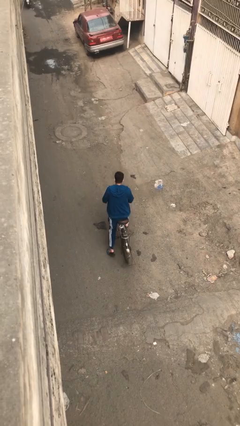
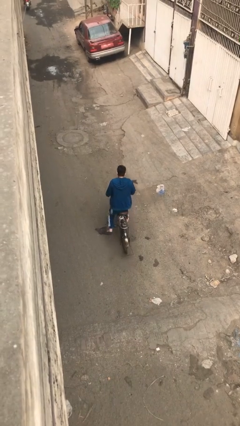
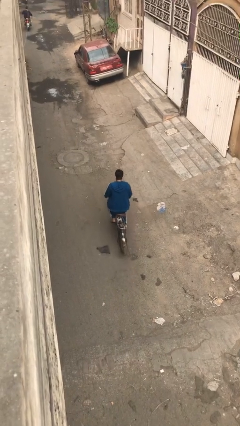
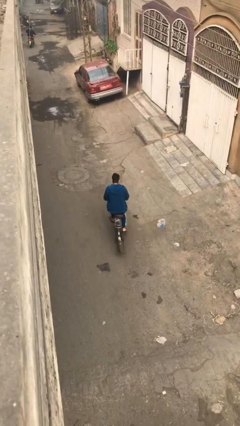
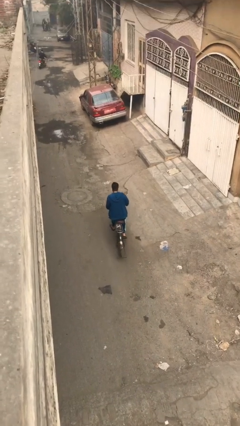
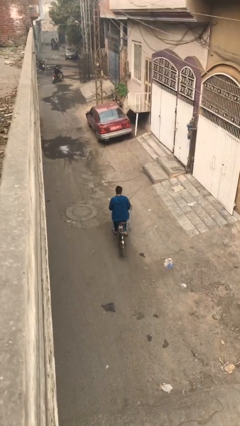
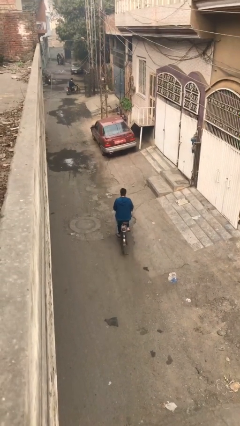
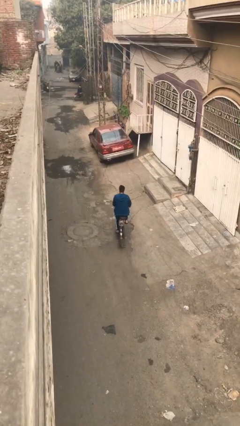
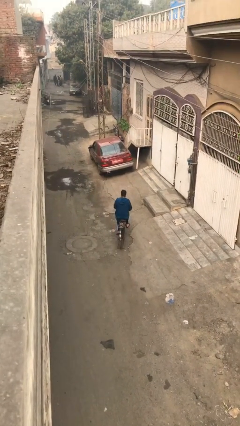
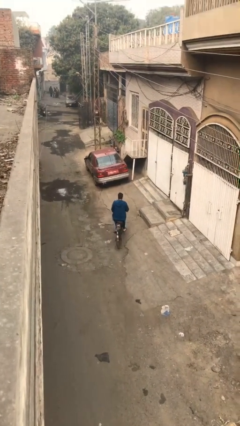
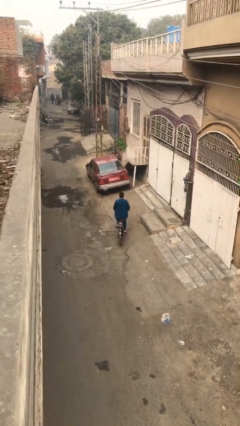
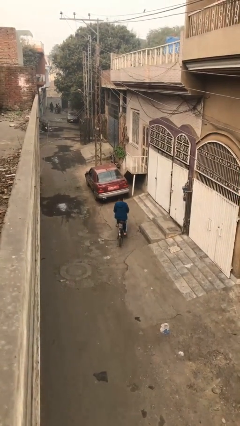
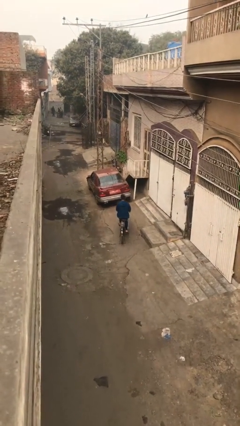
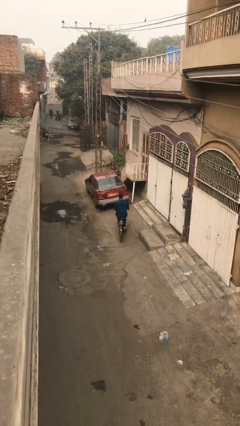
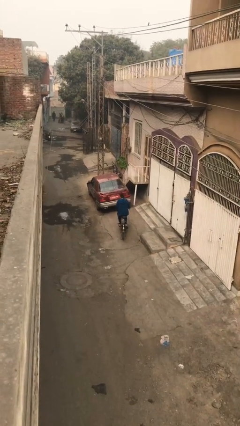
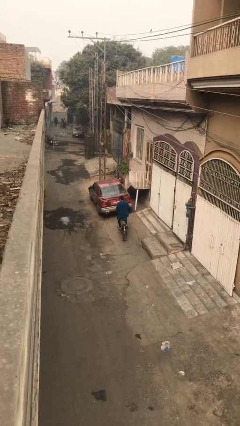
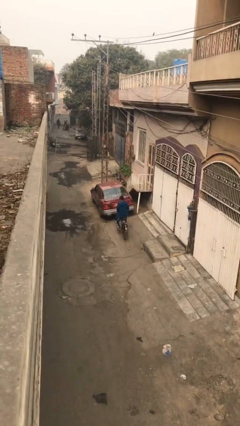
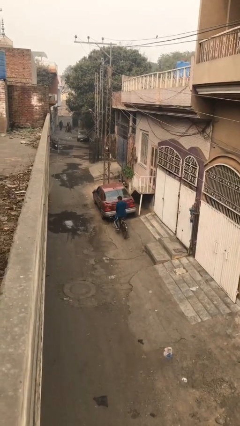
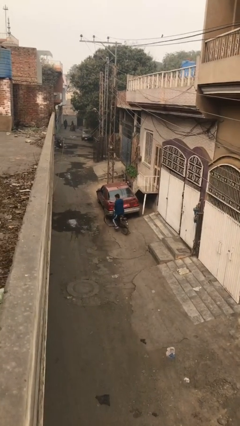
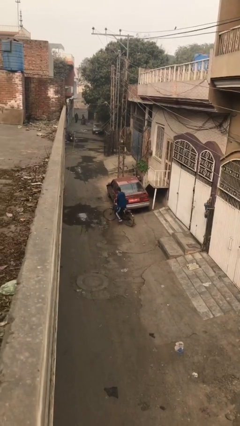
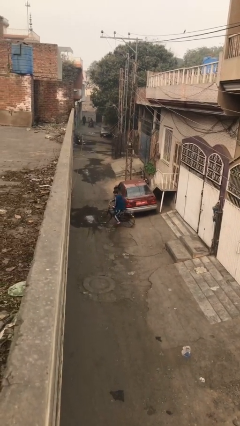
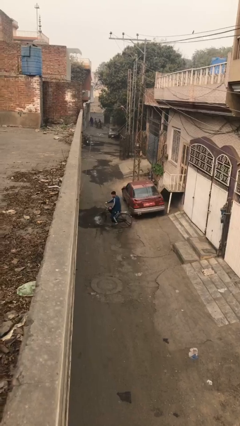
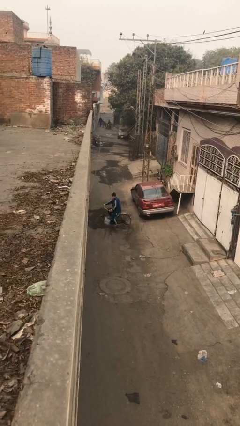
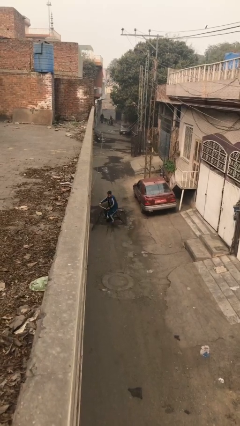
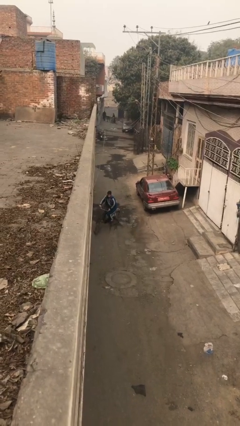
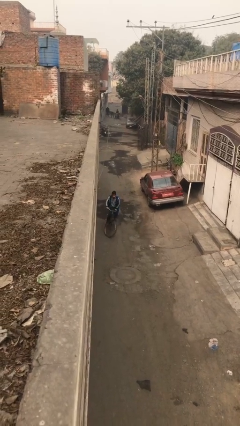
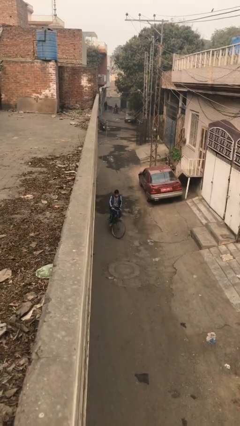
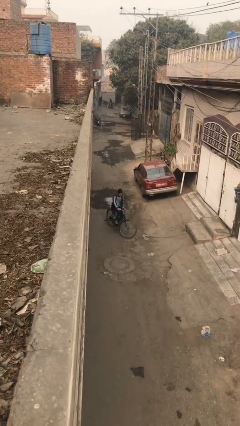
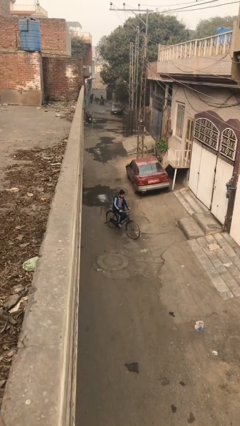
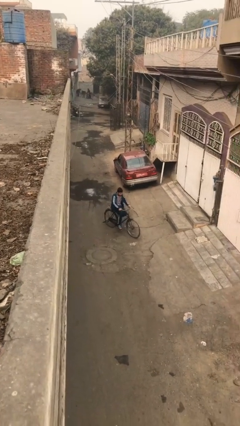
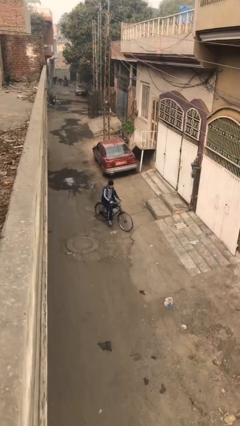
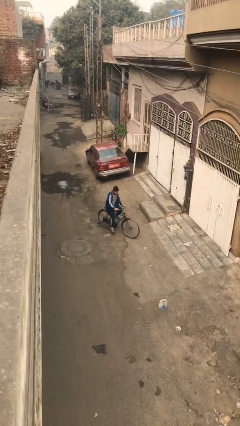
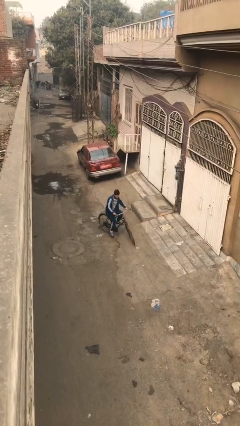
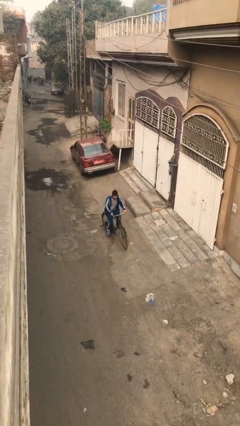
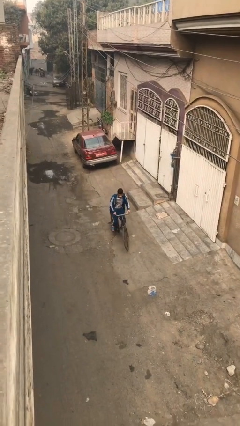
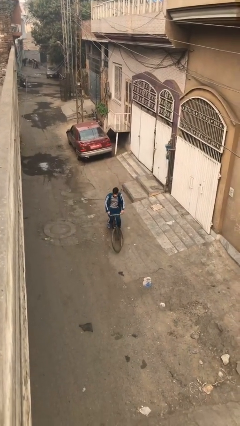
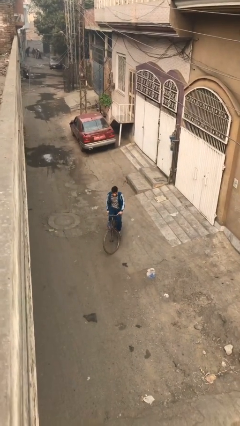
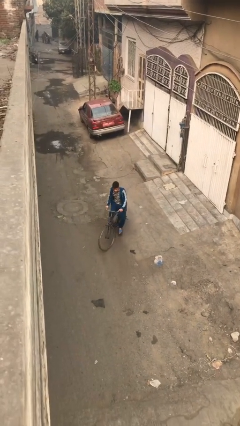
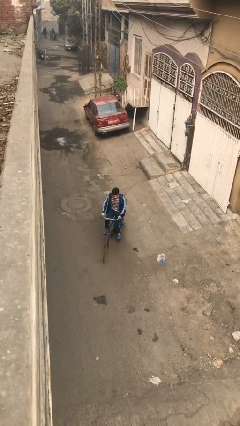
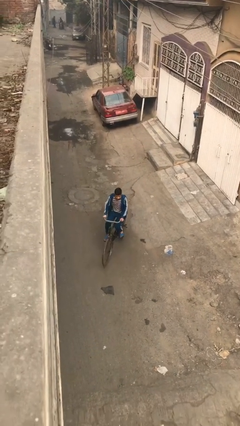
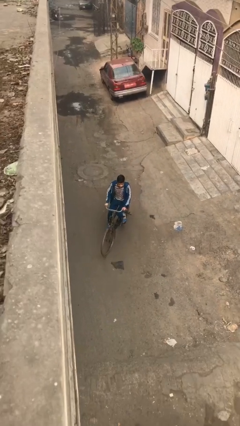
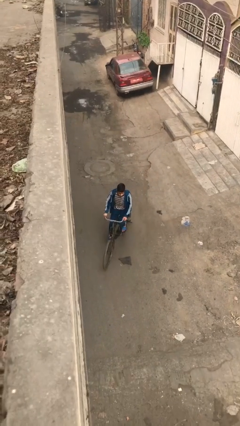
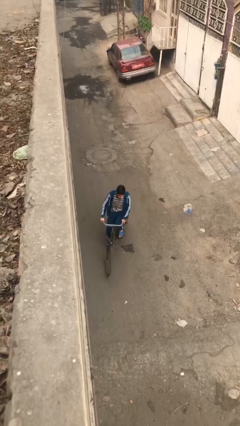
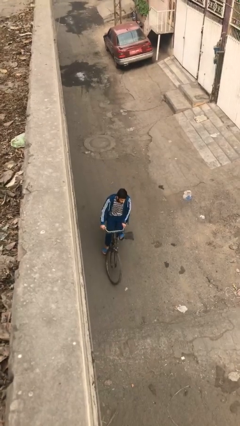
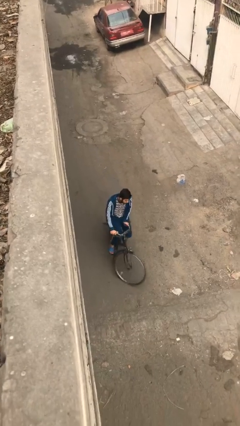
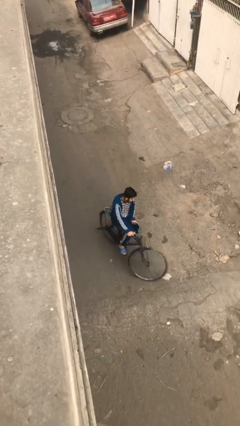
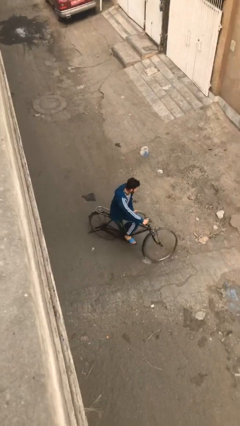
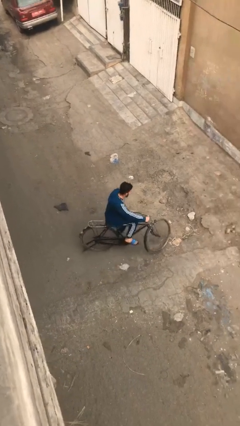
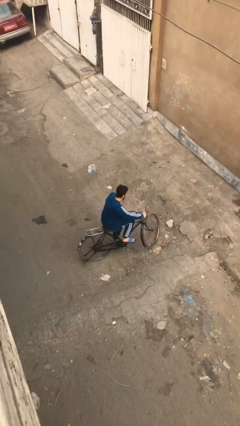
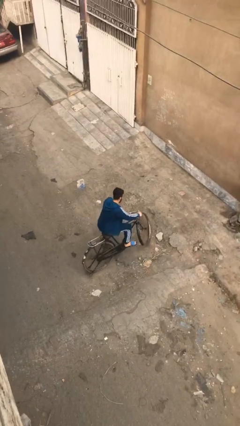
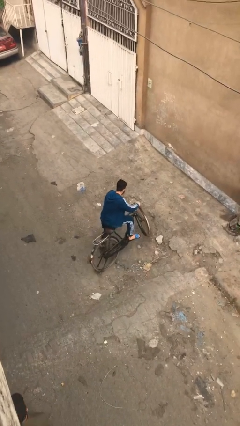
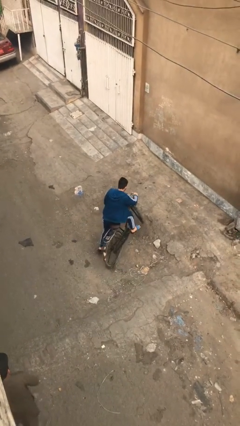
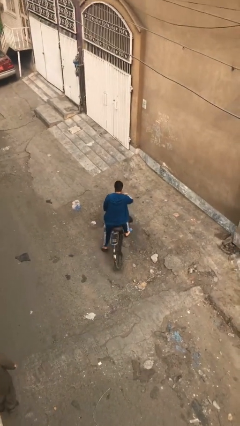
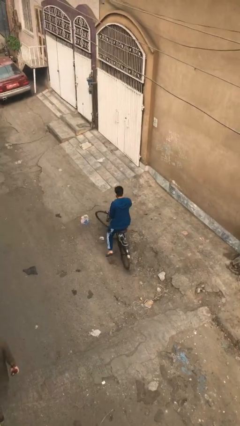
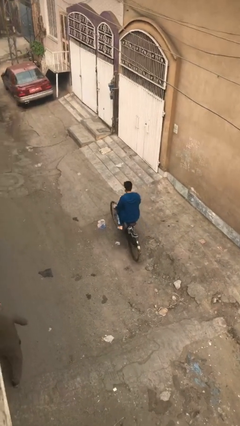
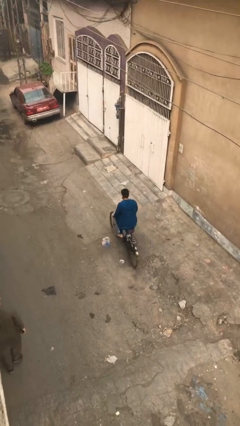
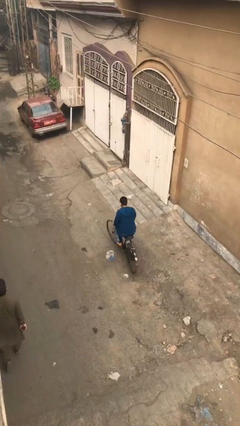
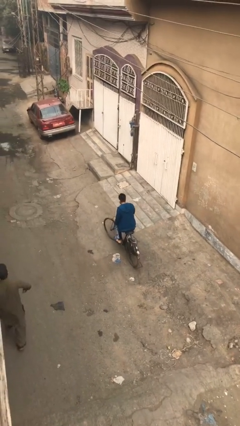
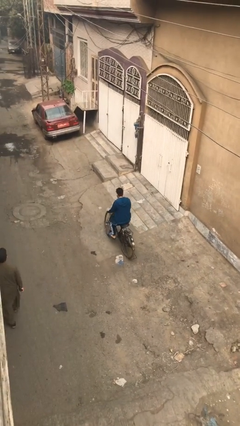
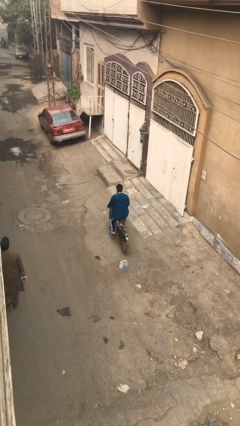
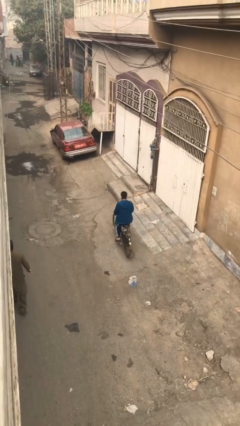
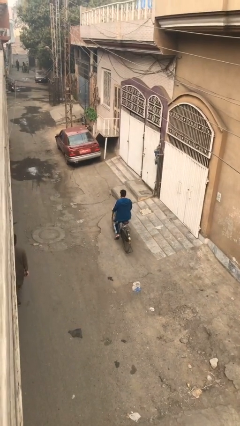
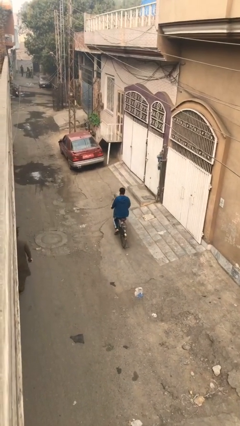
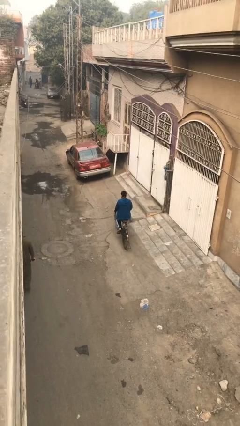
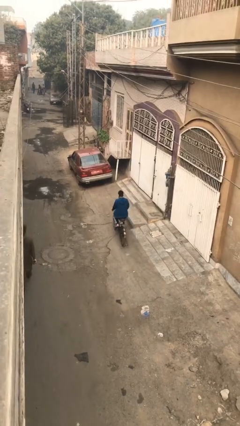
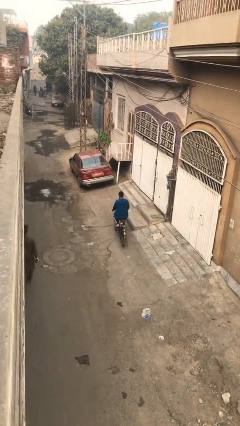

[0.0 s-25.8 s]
person rides bicycle

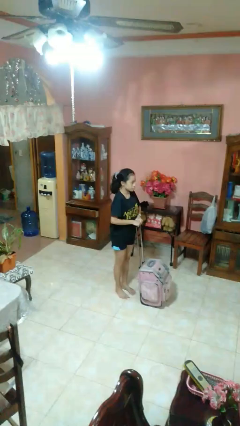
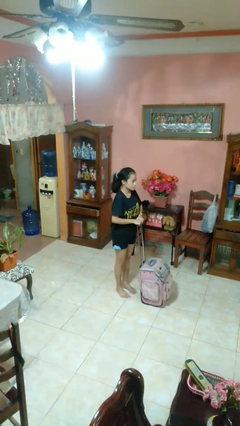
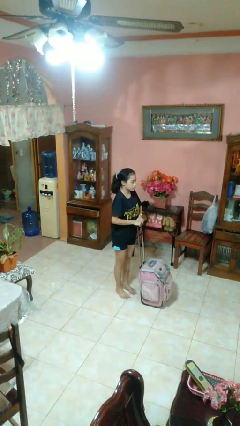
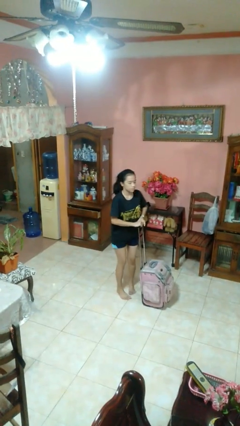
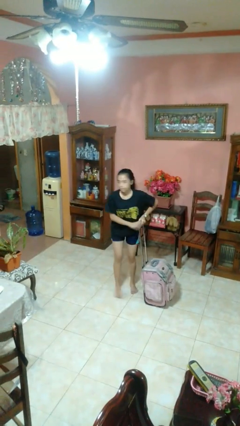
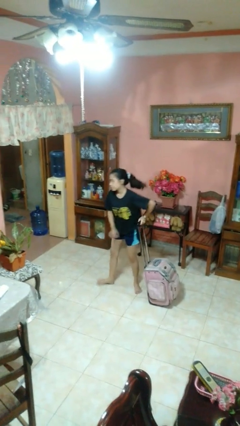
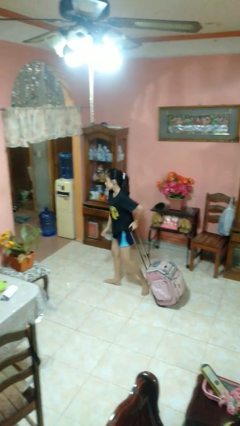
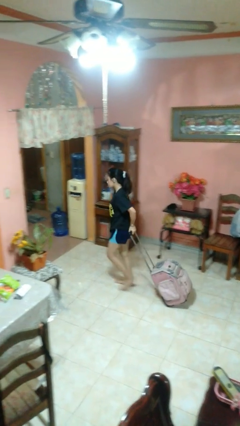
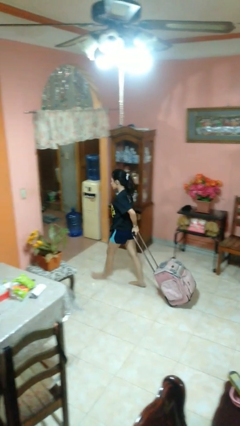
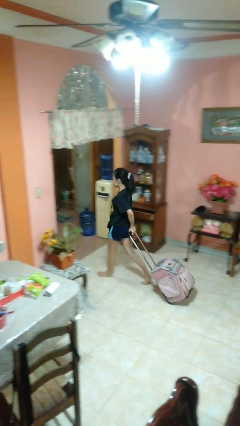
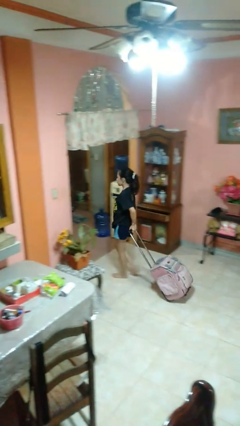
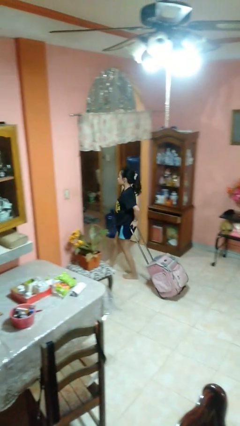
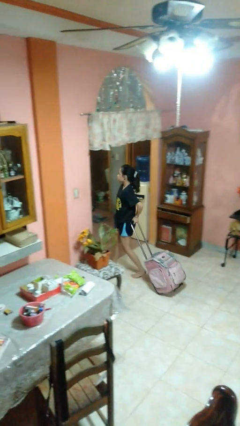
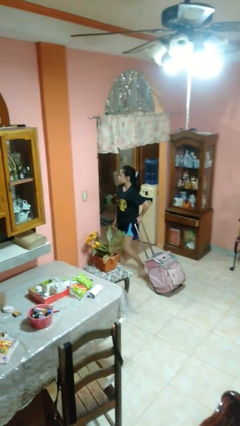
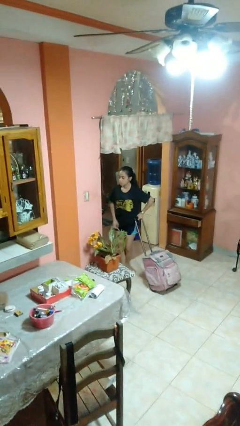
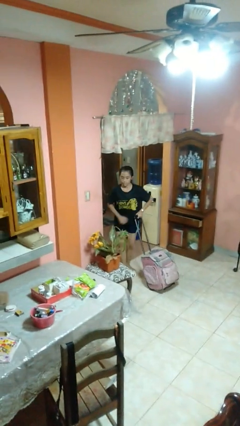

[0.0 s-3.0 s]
person pulls wheeled cart

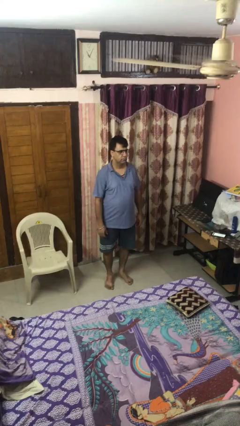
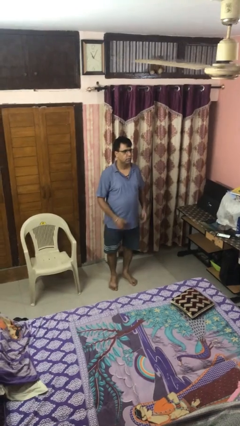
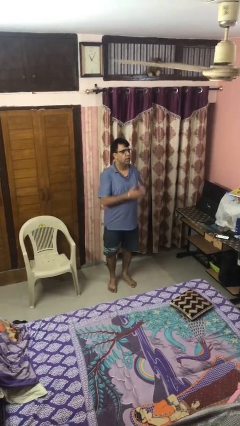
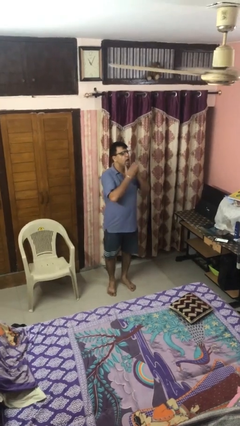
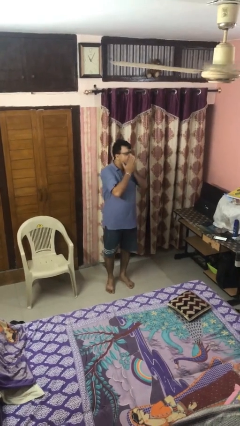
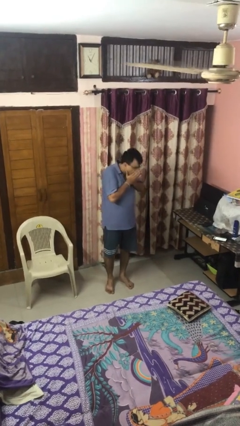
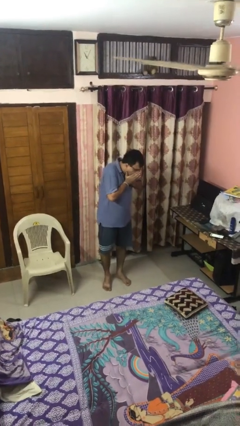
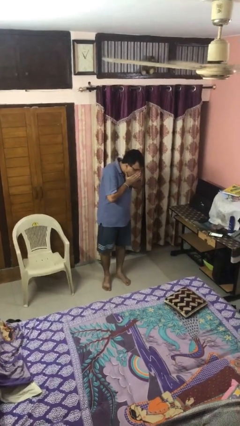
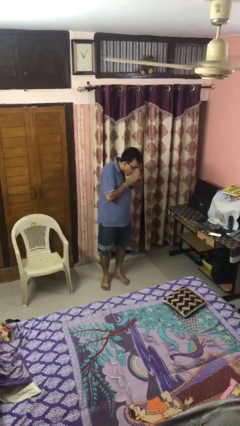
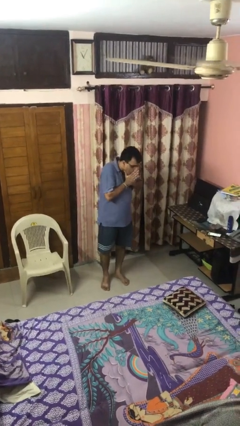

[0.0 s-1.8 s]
person sneezes into hand

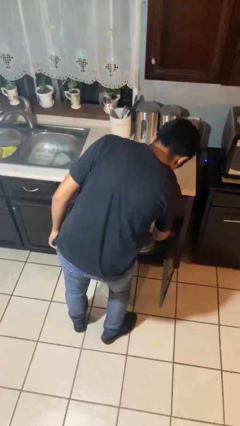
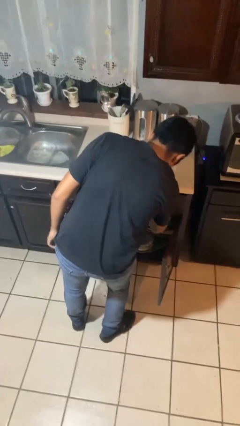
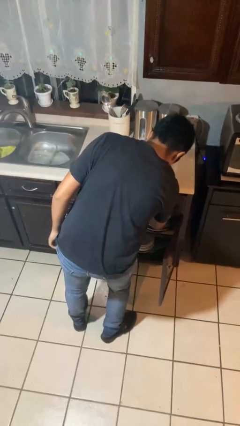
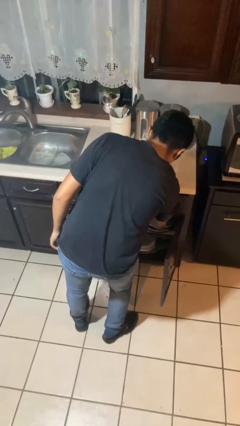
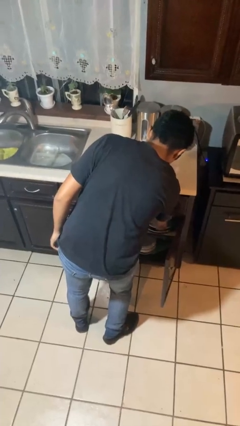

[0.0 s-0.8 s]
person takes object from cabinet
